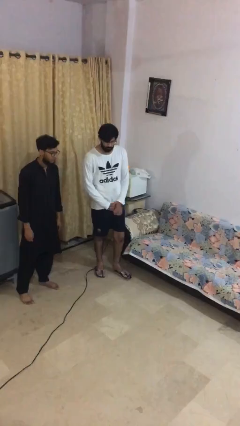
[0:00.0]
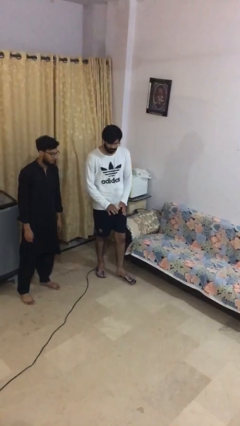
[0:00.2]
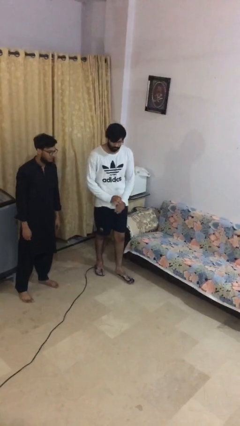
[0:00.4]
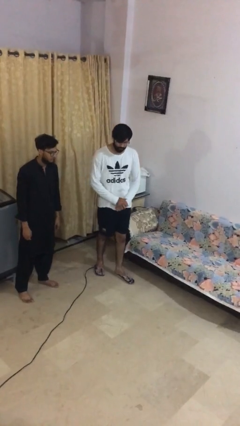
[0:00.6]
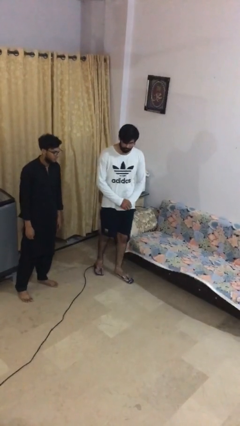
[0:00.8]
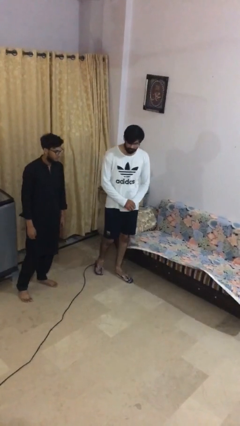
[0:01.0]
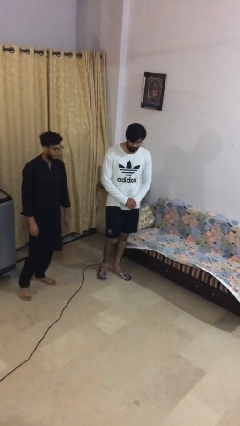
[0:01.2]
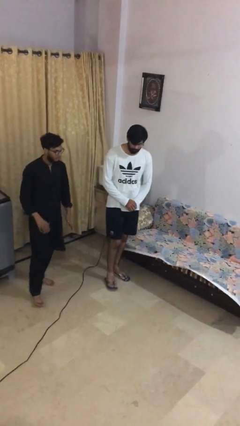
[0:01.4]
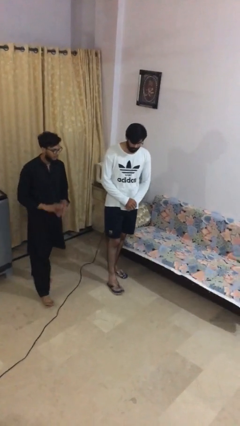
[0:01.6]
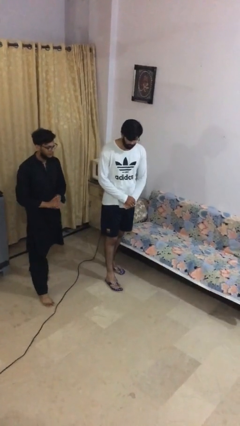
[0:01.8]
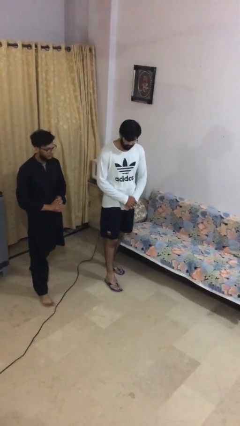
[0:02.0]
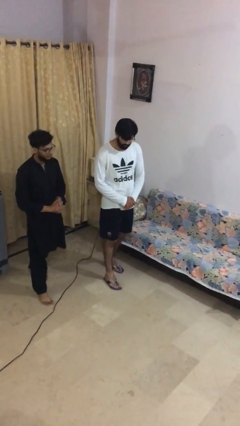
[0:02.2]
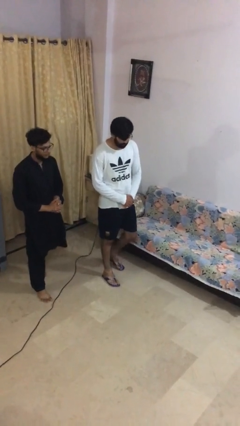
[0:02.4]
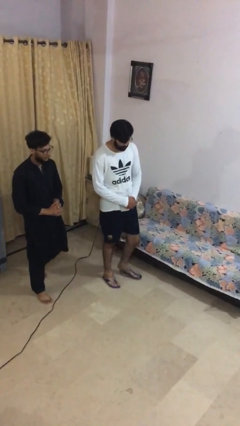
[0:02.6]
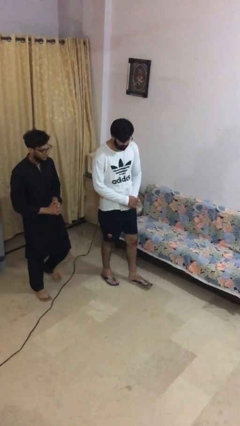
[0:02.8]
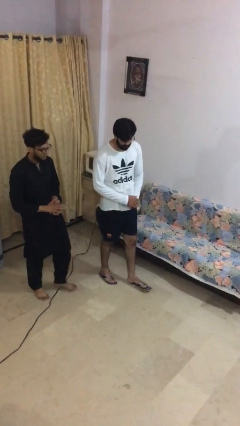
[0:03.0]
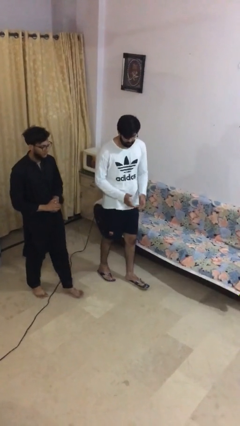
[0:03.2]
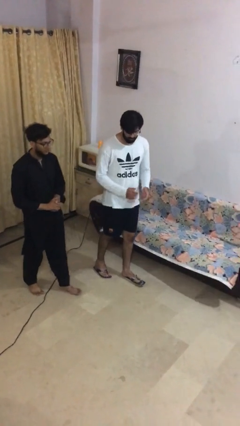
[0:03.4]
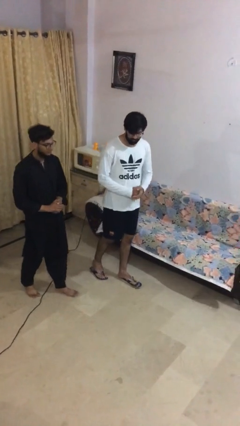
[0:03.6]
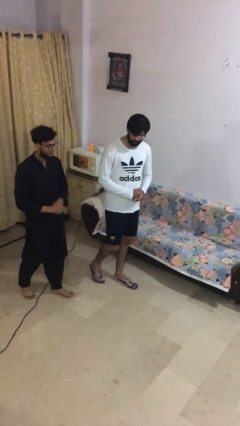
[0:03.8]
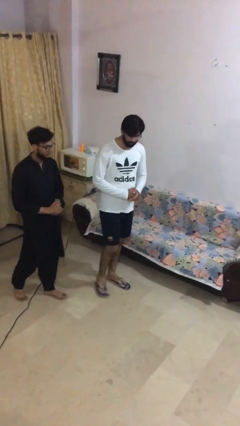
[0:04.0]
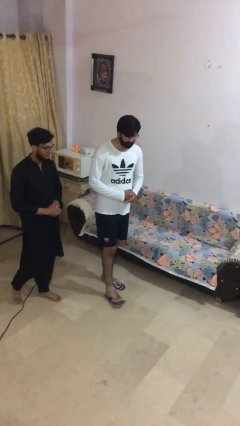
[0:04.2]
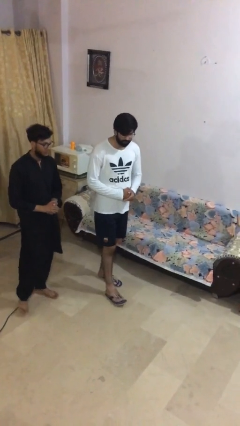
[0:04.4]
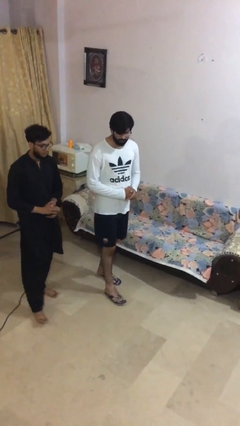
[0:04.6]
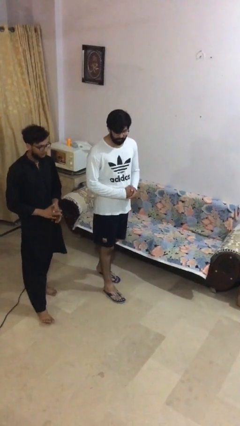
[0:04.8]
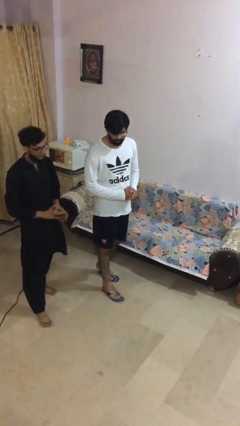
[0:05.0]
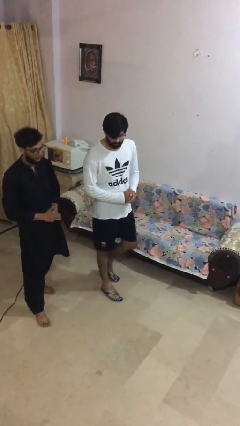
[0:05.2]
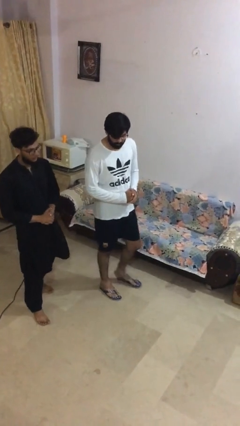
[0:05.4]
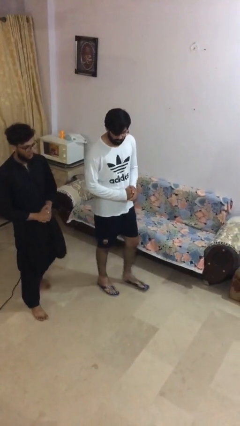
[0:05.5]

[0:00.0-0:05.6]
person talks to person

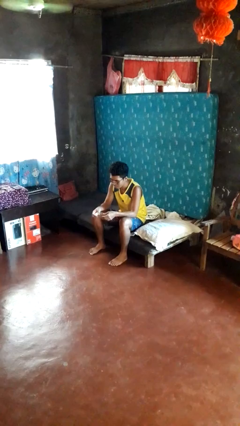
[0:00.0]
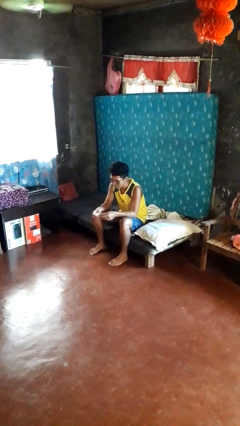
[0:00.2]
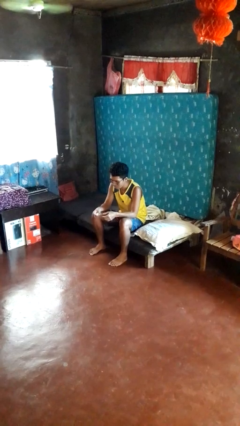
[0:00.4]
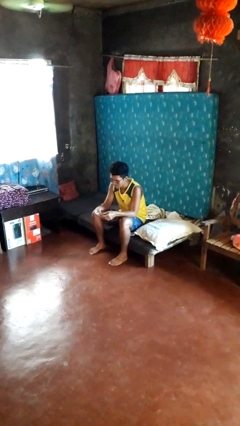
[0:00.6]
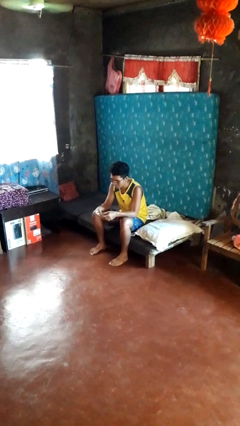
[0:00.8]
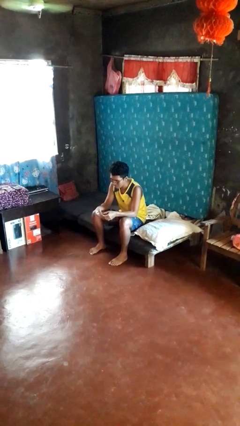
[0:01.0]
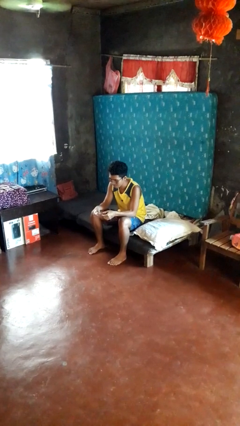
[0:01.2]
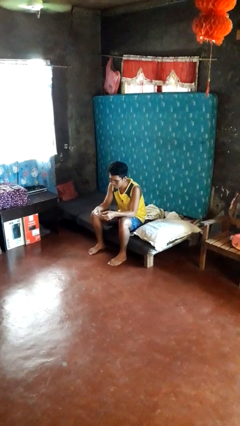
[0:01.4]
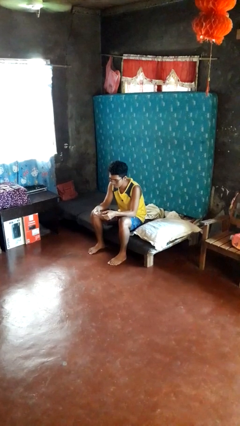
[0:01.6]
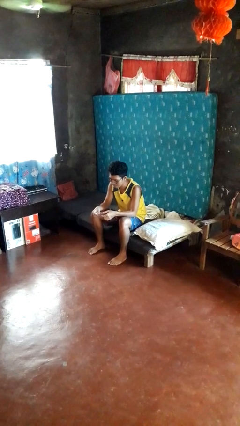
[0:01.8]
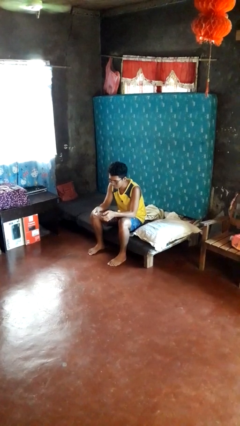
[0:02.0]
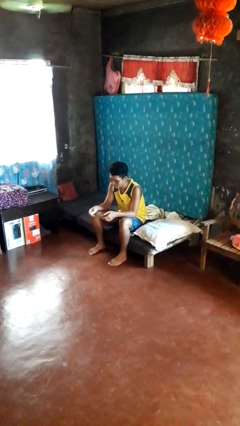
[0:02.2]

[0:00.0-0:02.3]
person clips fingernails

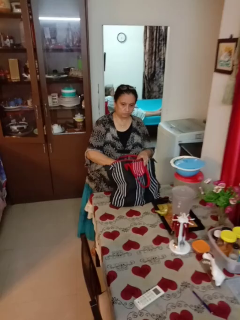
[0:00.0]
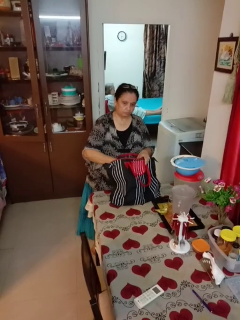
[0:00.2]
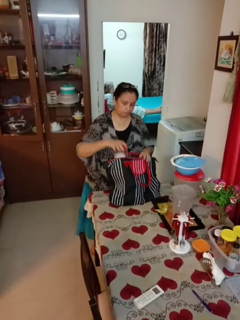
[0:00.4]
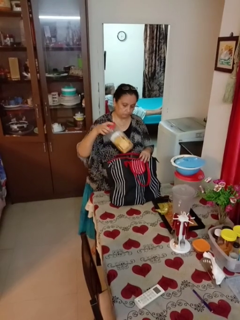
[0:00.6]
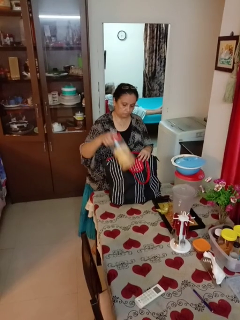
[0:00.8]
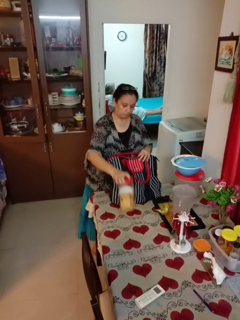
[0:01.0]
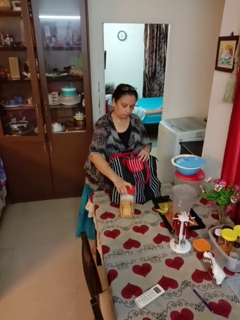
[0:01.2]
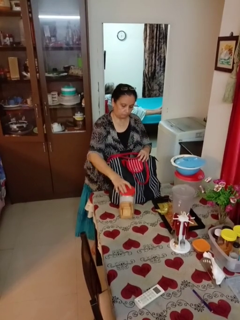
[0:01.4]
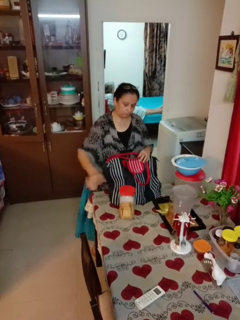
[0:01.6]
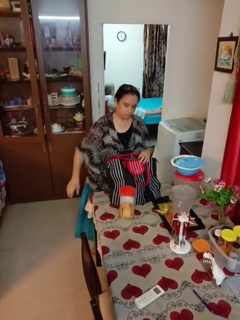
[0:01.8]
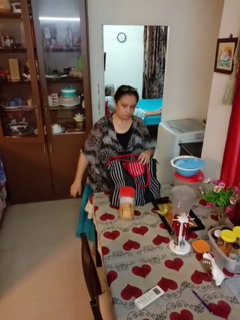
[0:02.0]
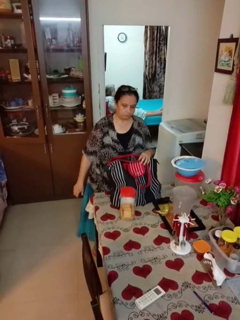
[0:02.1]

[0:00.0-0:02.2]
person takes object from bag

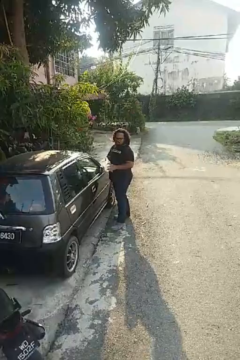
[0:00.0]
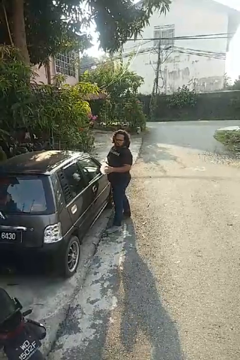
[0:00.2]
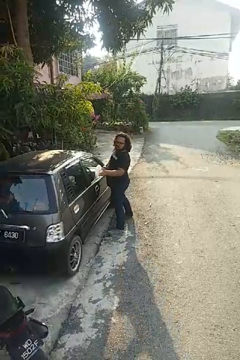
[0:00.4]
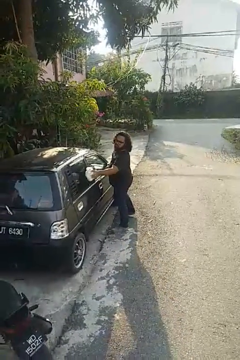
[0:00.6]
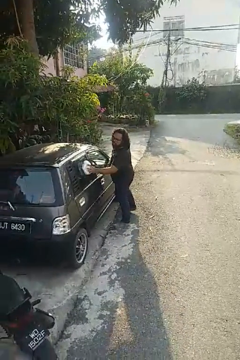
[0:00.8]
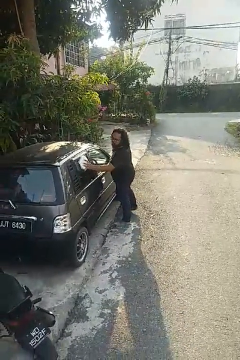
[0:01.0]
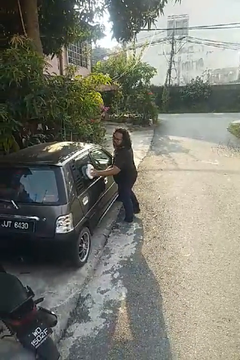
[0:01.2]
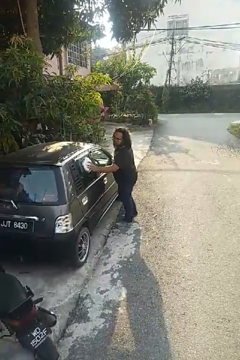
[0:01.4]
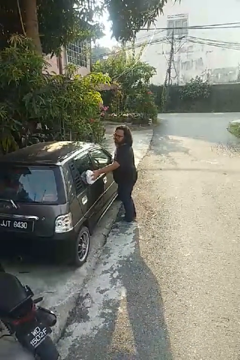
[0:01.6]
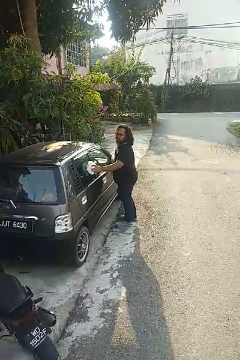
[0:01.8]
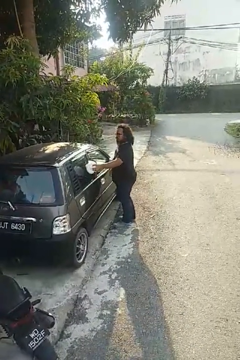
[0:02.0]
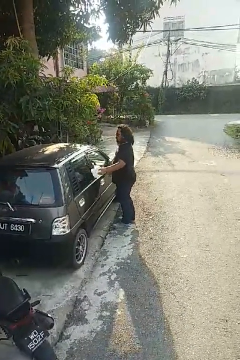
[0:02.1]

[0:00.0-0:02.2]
person polishes car with rag

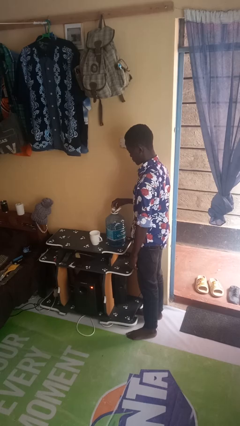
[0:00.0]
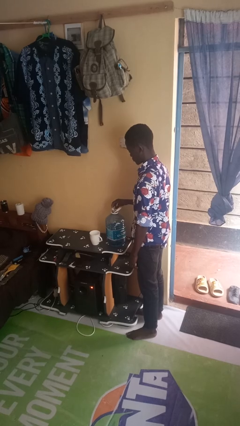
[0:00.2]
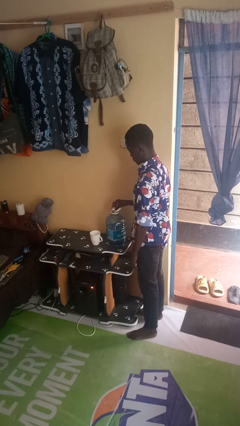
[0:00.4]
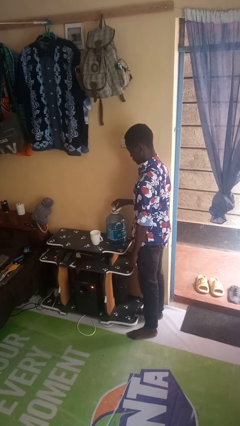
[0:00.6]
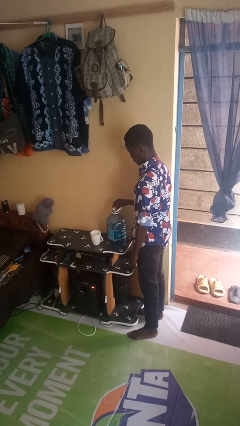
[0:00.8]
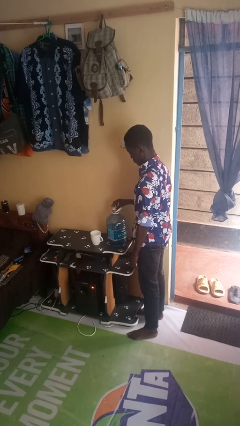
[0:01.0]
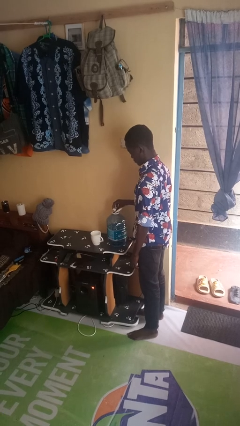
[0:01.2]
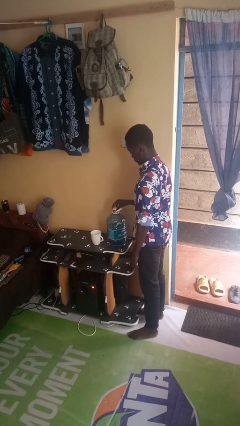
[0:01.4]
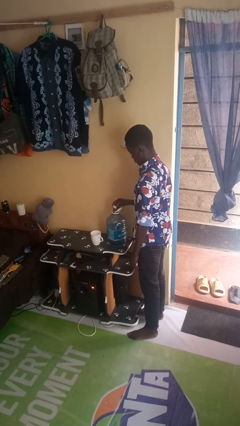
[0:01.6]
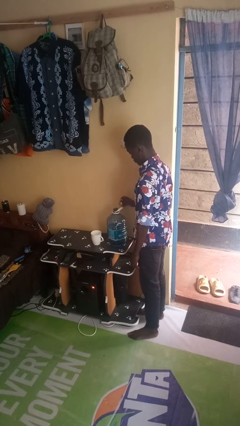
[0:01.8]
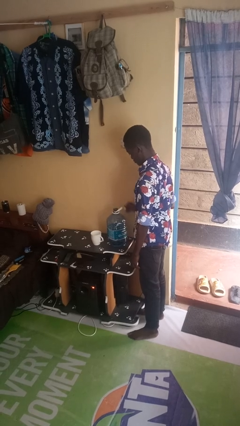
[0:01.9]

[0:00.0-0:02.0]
person unscrews lid from bottle

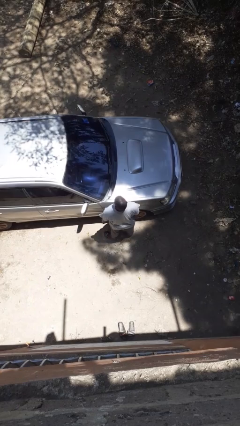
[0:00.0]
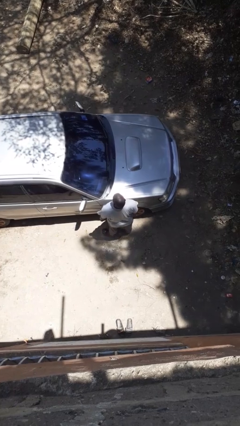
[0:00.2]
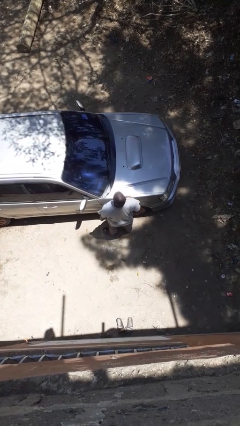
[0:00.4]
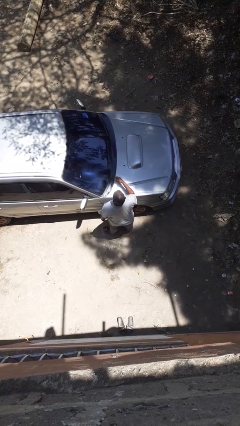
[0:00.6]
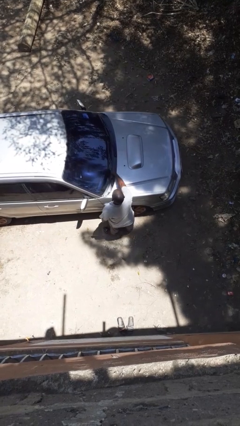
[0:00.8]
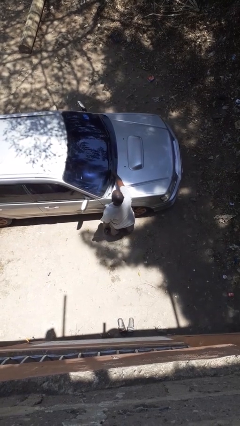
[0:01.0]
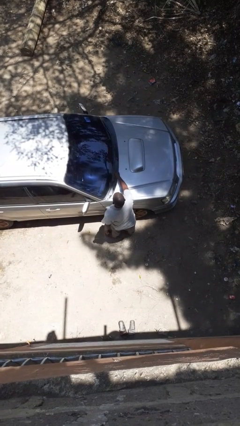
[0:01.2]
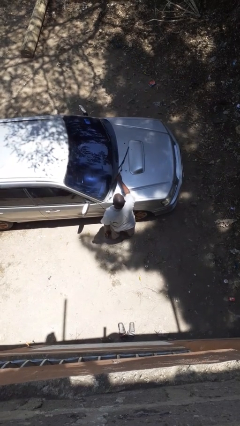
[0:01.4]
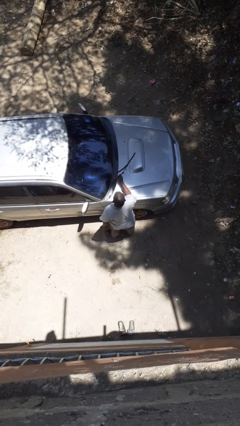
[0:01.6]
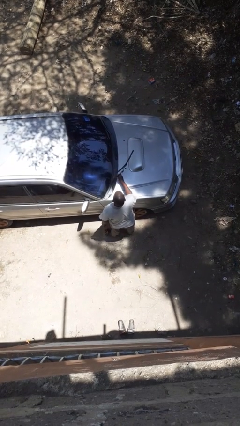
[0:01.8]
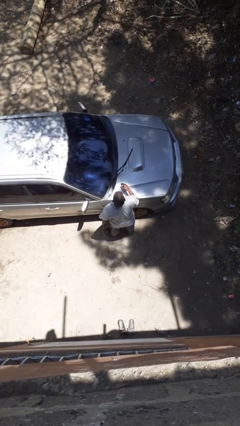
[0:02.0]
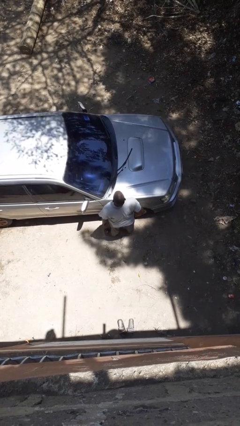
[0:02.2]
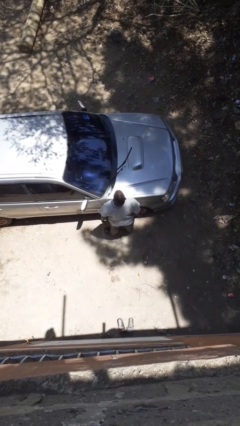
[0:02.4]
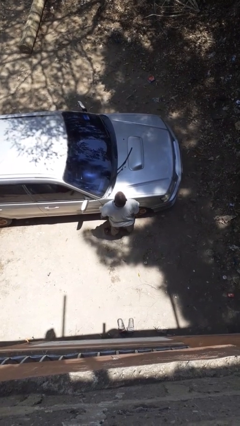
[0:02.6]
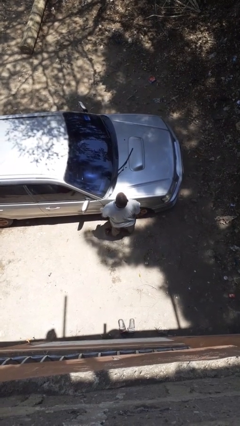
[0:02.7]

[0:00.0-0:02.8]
person flips up car wipers

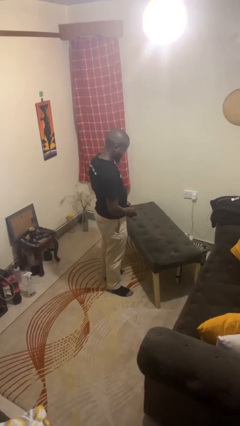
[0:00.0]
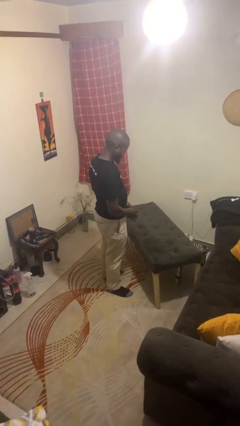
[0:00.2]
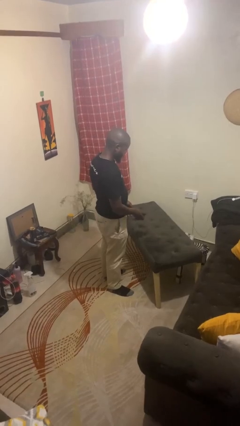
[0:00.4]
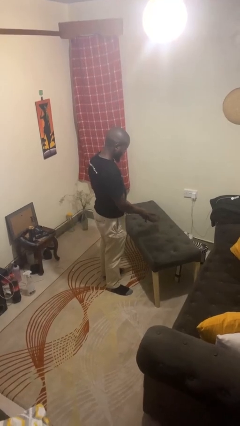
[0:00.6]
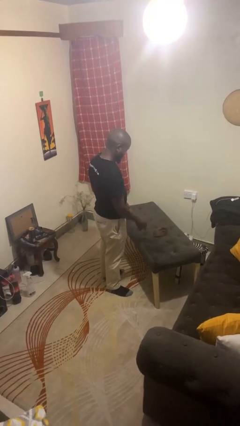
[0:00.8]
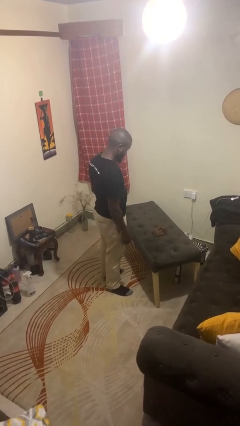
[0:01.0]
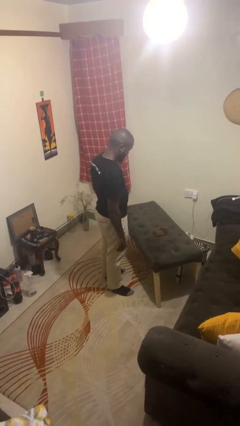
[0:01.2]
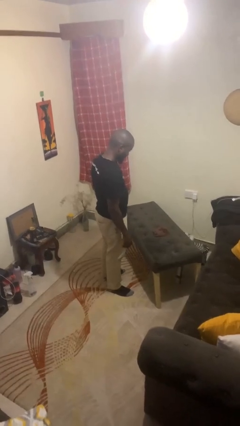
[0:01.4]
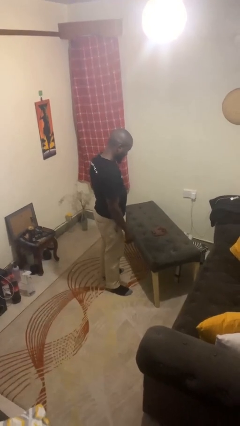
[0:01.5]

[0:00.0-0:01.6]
person throws object on table
